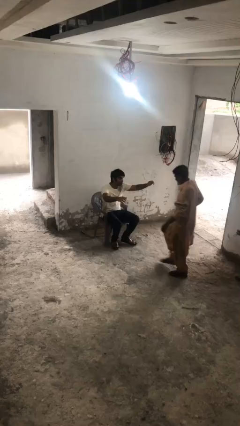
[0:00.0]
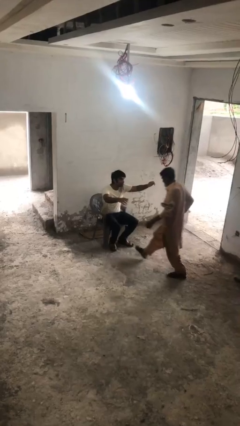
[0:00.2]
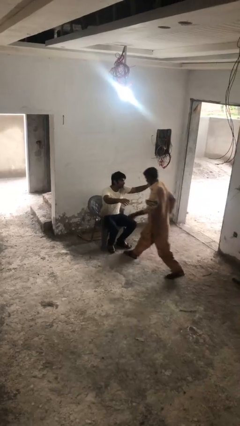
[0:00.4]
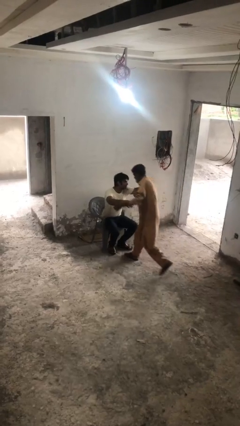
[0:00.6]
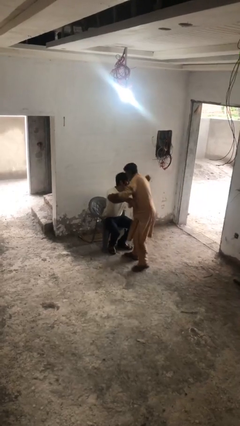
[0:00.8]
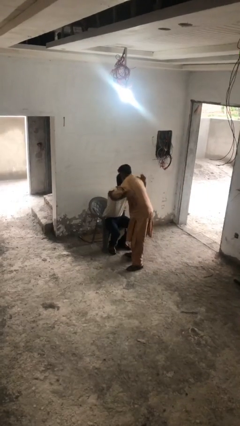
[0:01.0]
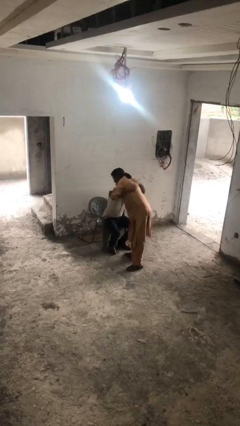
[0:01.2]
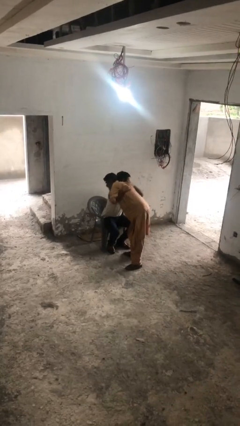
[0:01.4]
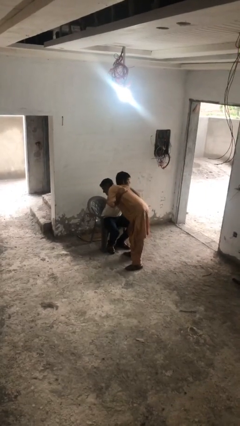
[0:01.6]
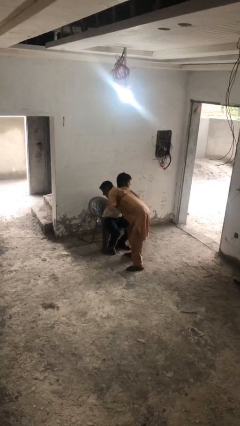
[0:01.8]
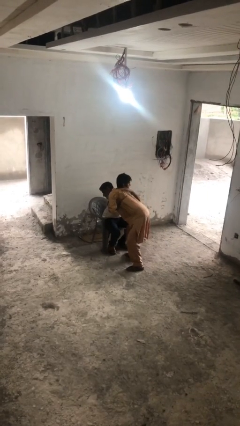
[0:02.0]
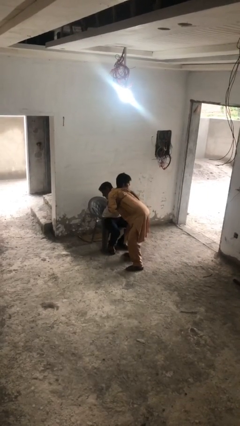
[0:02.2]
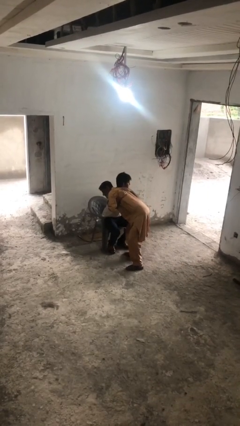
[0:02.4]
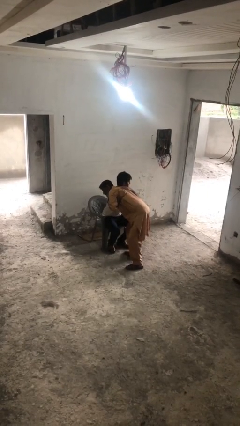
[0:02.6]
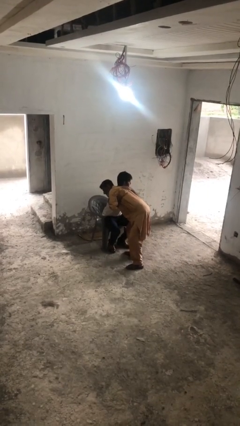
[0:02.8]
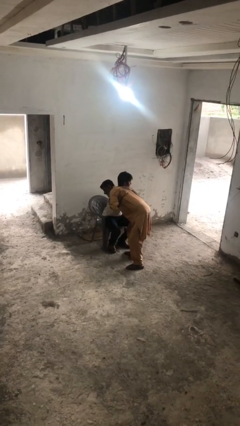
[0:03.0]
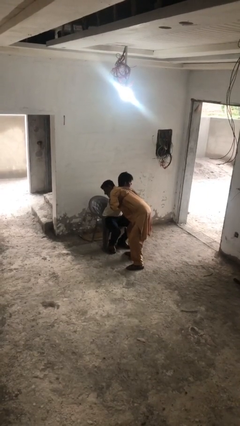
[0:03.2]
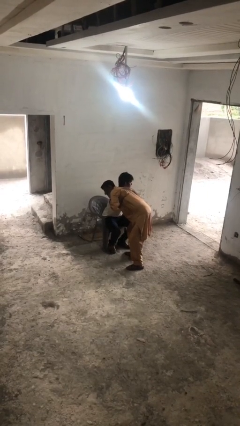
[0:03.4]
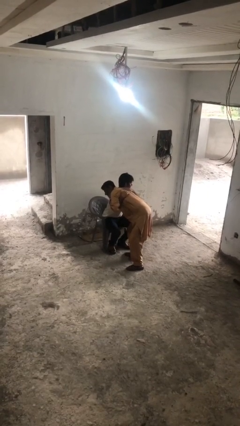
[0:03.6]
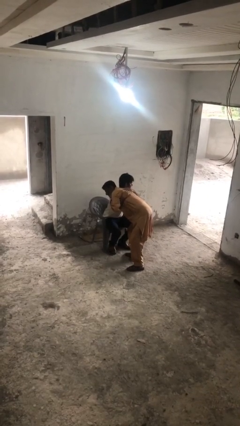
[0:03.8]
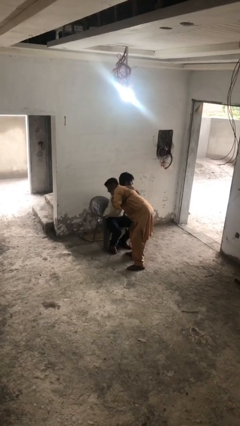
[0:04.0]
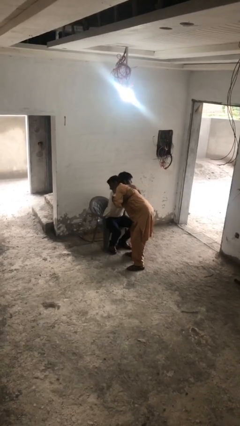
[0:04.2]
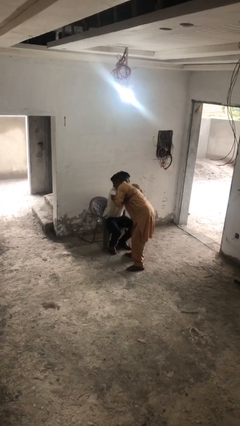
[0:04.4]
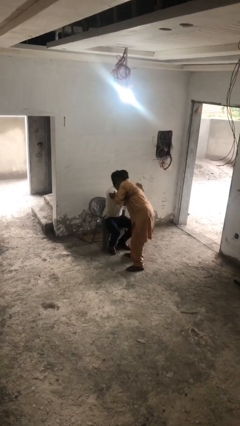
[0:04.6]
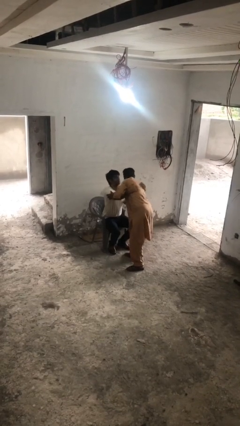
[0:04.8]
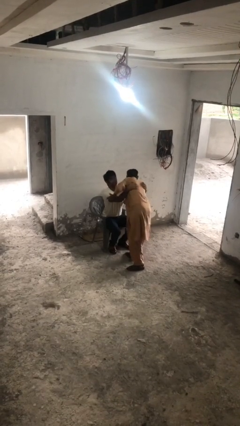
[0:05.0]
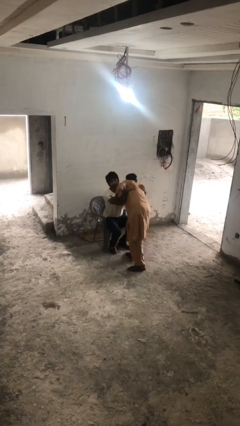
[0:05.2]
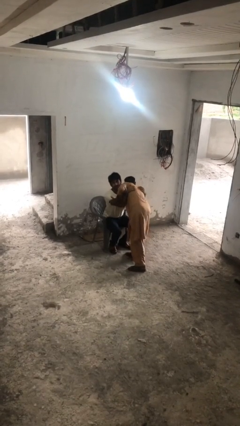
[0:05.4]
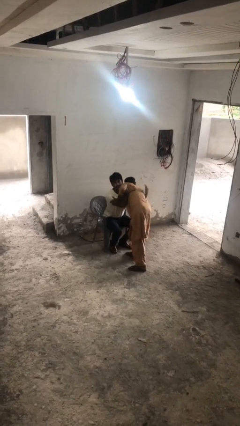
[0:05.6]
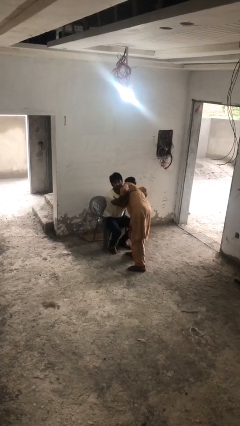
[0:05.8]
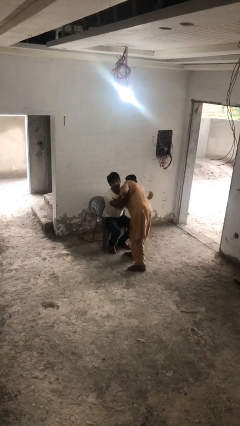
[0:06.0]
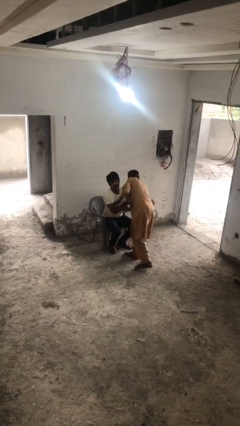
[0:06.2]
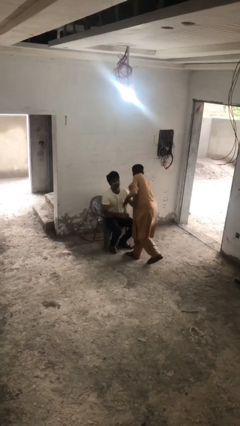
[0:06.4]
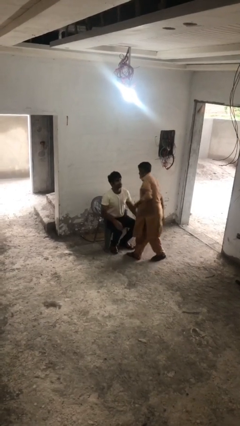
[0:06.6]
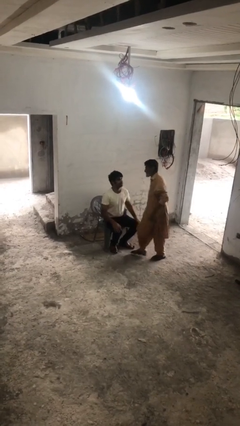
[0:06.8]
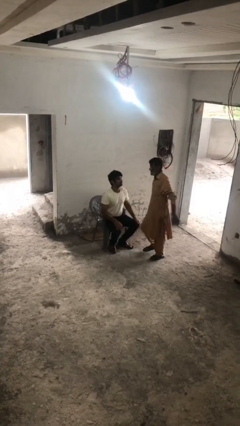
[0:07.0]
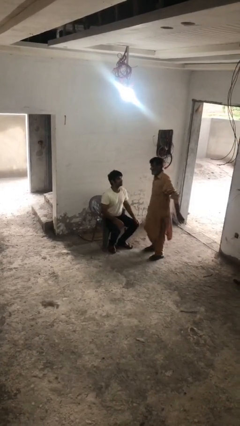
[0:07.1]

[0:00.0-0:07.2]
person embraces person

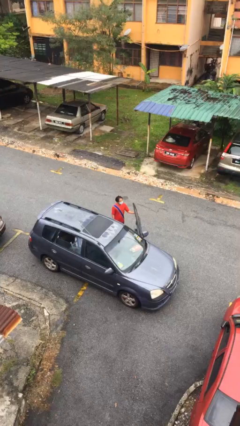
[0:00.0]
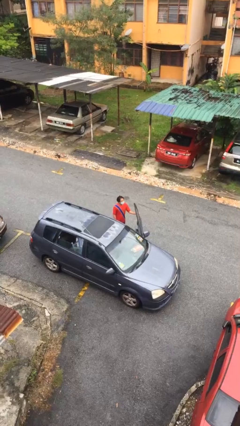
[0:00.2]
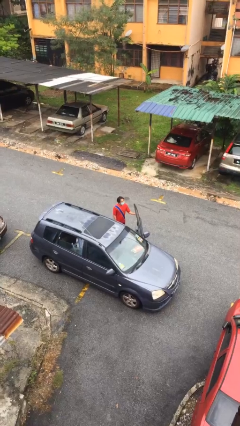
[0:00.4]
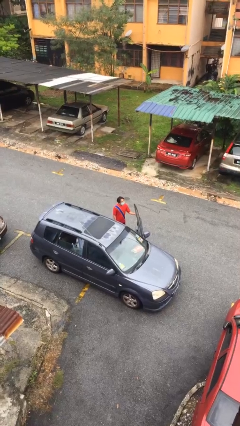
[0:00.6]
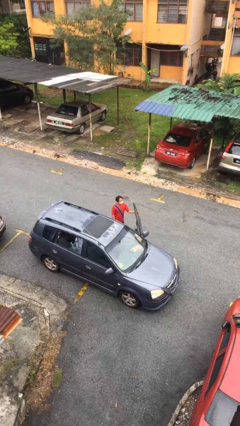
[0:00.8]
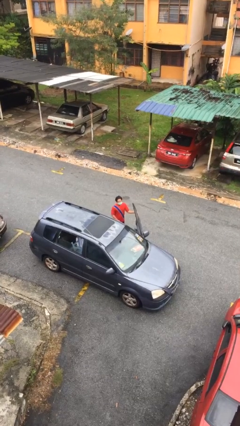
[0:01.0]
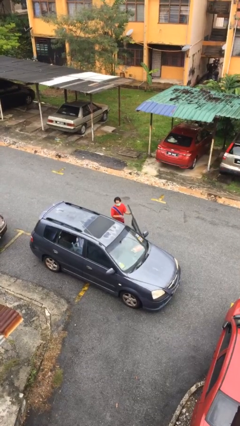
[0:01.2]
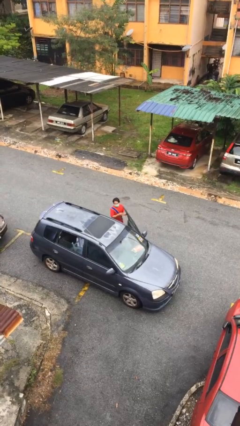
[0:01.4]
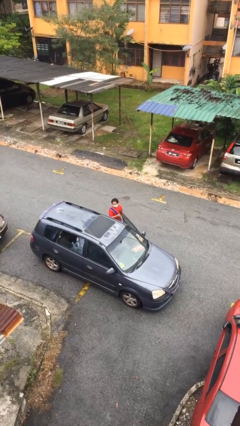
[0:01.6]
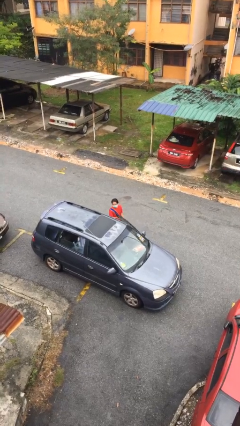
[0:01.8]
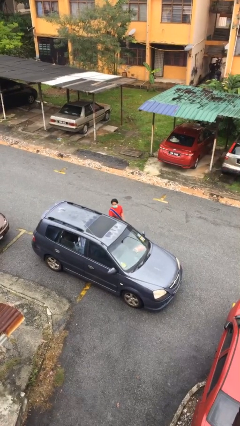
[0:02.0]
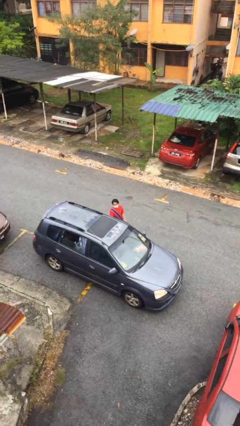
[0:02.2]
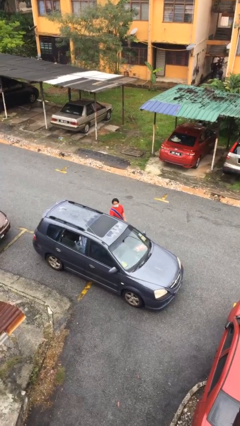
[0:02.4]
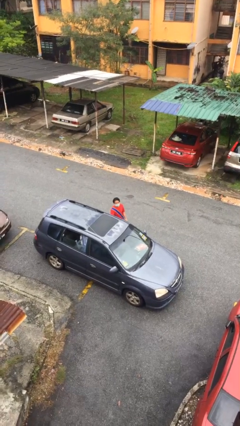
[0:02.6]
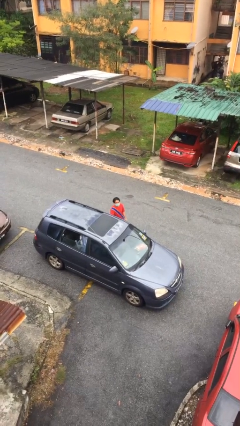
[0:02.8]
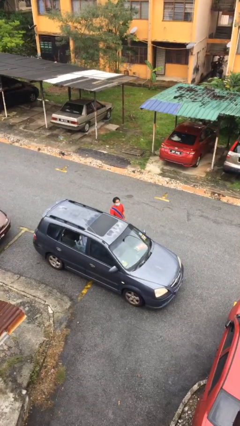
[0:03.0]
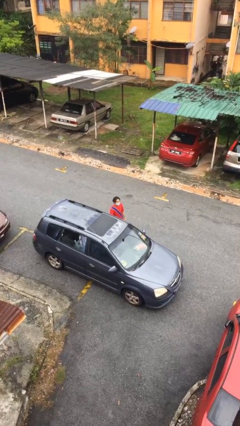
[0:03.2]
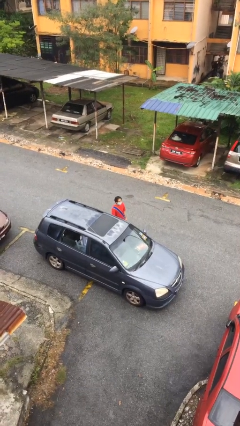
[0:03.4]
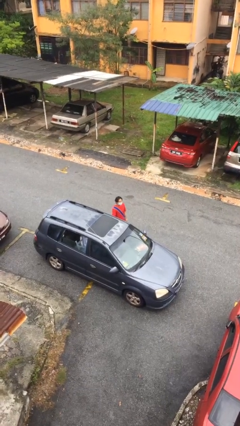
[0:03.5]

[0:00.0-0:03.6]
person closes car door

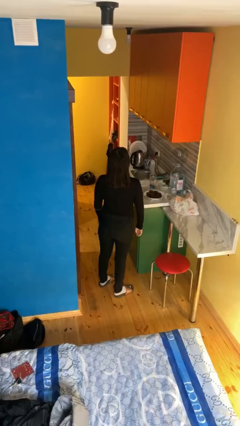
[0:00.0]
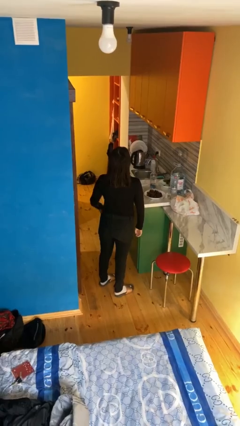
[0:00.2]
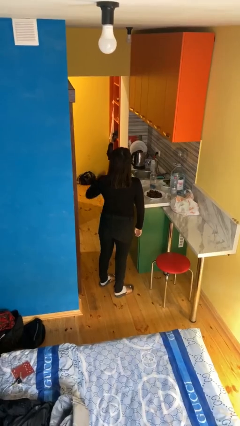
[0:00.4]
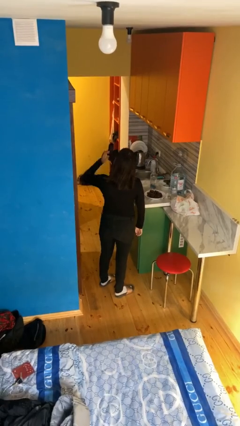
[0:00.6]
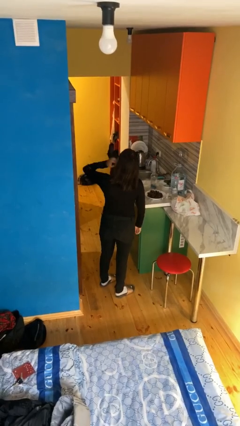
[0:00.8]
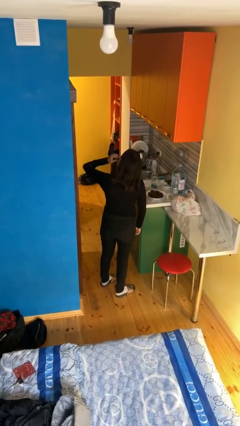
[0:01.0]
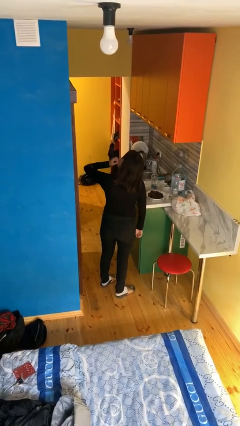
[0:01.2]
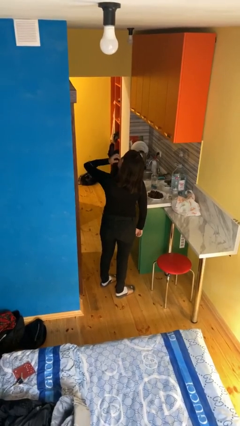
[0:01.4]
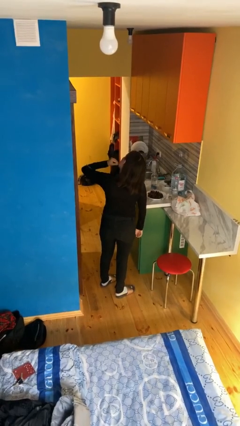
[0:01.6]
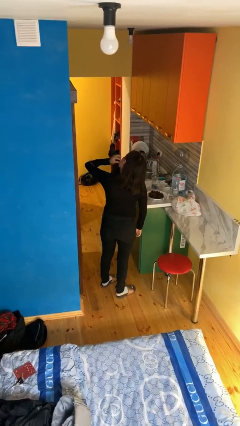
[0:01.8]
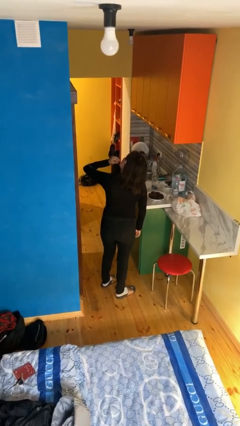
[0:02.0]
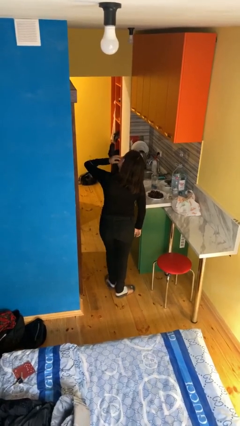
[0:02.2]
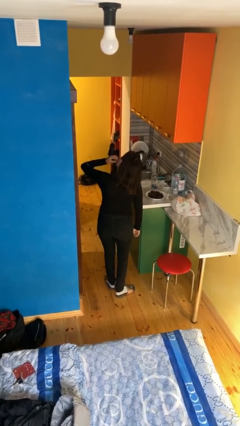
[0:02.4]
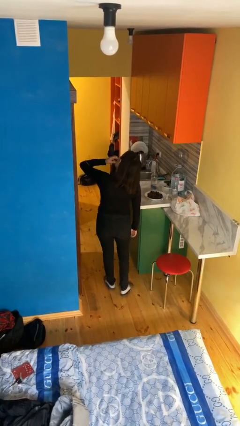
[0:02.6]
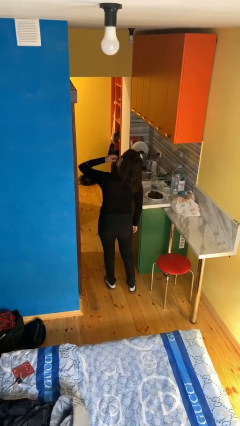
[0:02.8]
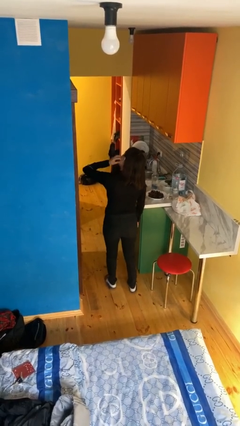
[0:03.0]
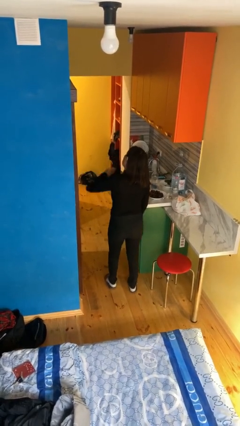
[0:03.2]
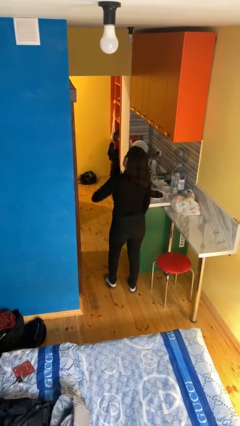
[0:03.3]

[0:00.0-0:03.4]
person scratches face

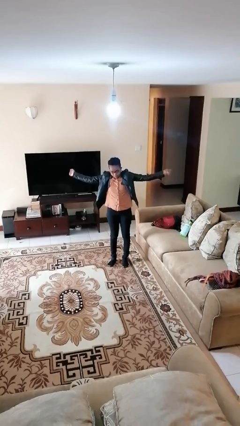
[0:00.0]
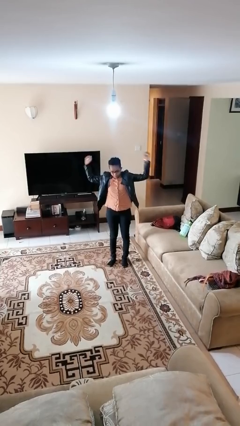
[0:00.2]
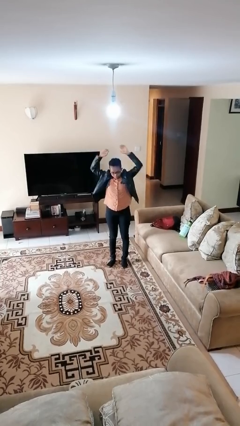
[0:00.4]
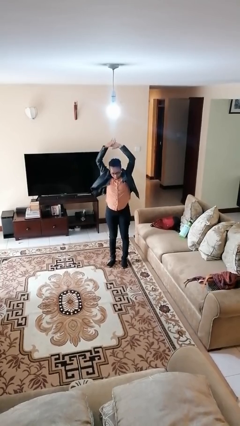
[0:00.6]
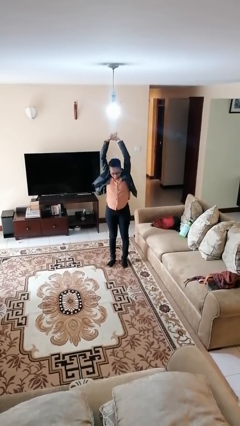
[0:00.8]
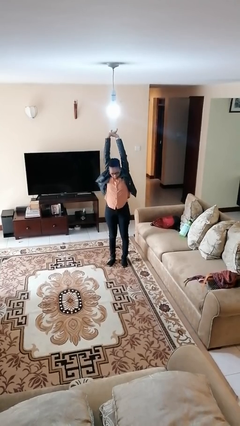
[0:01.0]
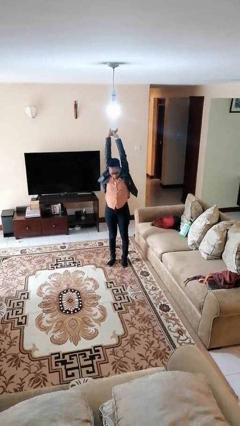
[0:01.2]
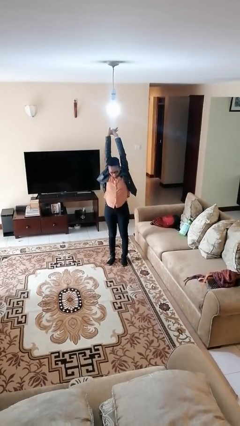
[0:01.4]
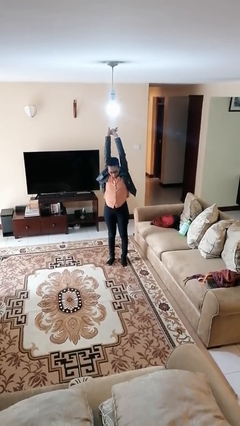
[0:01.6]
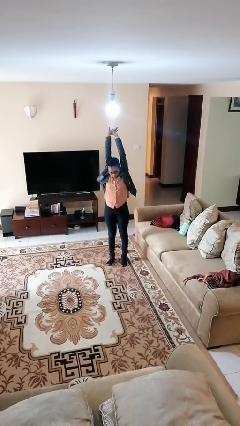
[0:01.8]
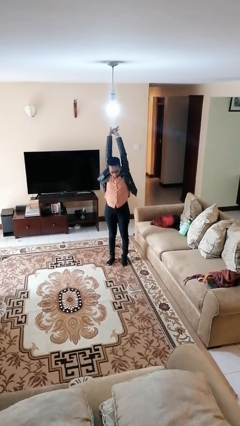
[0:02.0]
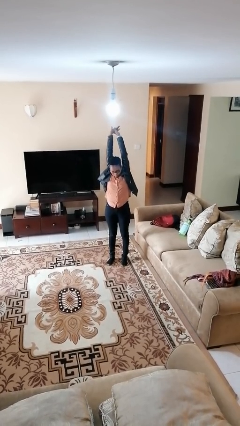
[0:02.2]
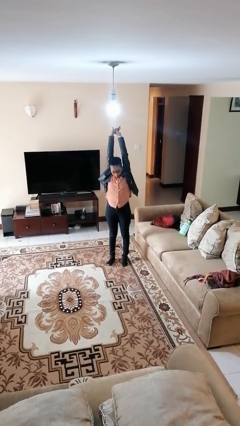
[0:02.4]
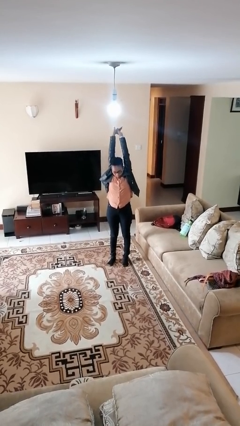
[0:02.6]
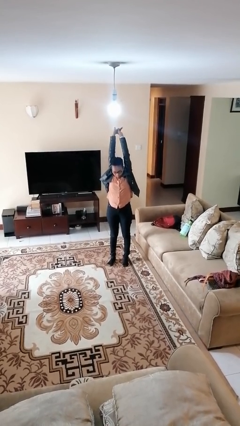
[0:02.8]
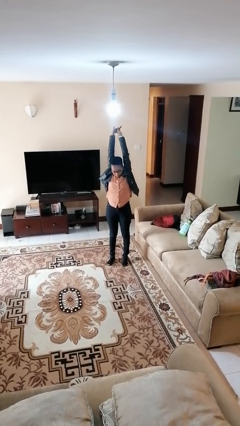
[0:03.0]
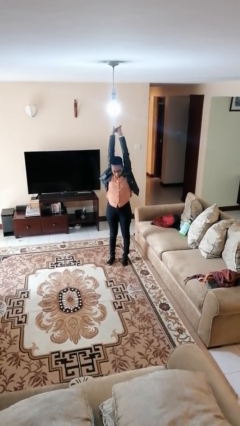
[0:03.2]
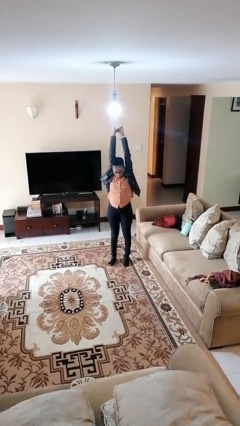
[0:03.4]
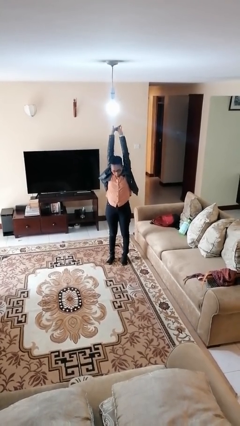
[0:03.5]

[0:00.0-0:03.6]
person stretches arms over head
